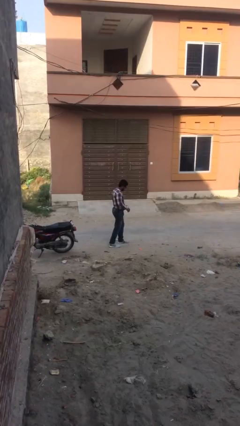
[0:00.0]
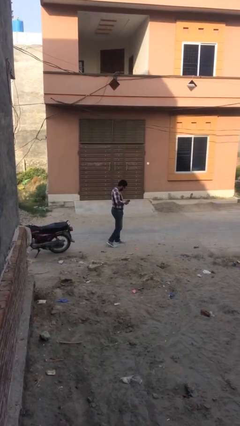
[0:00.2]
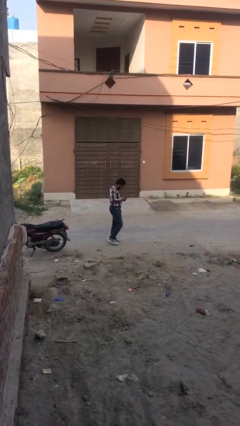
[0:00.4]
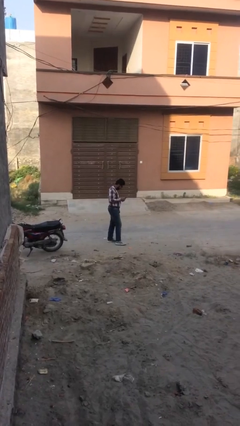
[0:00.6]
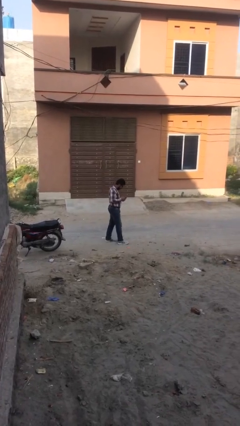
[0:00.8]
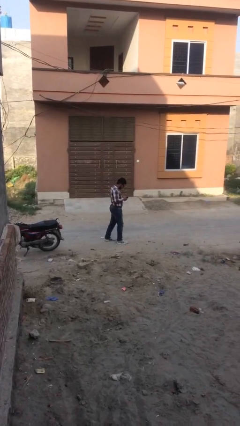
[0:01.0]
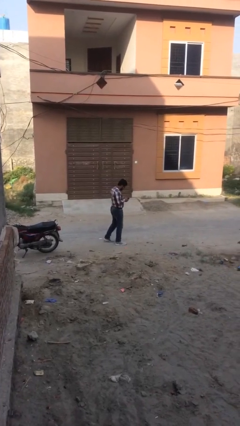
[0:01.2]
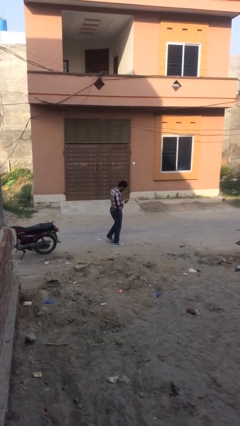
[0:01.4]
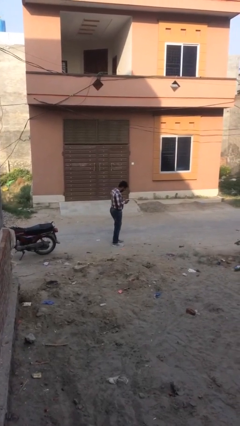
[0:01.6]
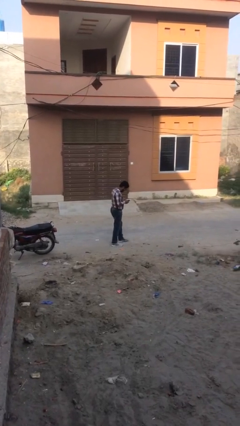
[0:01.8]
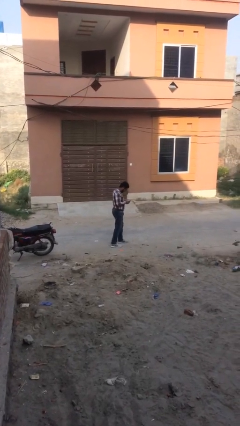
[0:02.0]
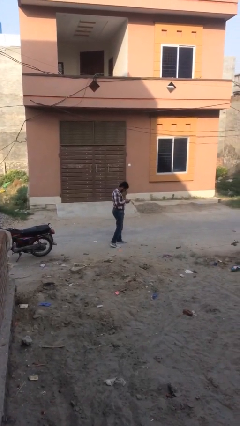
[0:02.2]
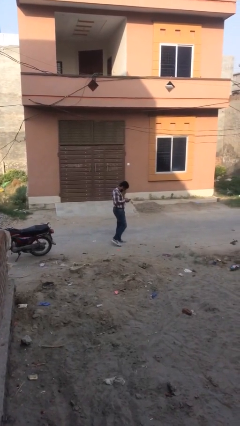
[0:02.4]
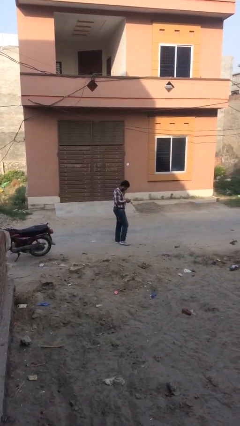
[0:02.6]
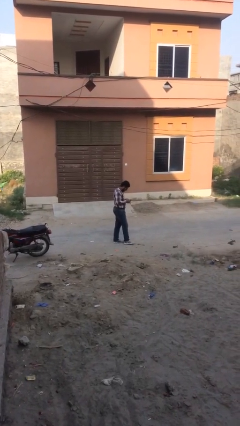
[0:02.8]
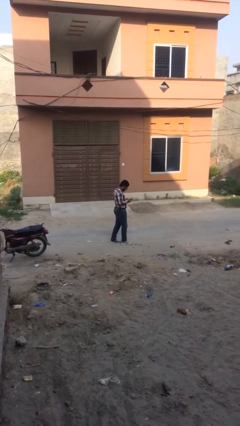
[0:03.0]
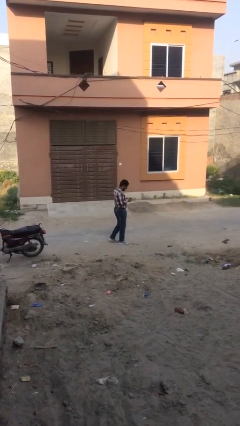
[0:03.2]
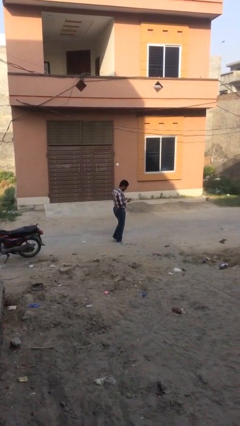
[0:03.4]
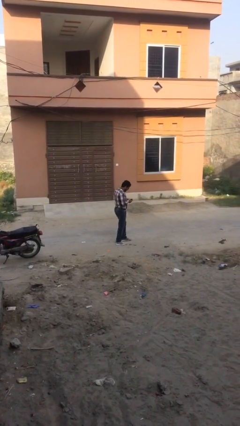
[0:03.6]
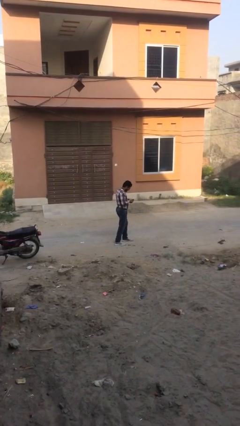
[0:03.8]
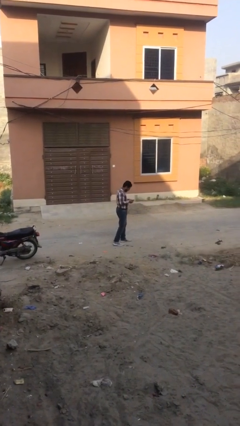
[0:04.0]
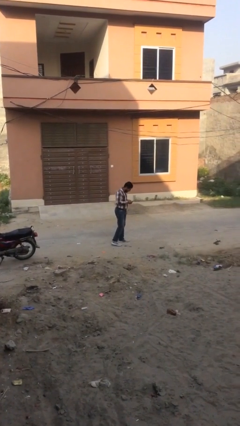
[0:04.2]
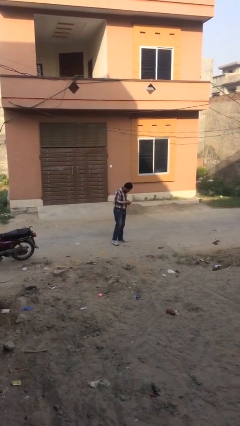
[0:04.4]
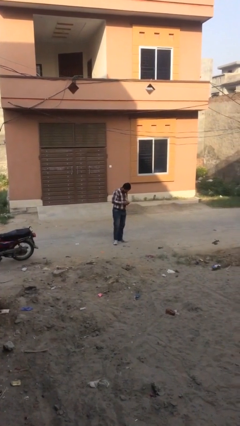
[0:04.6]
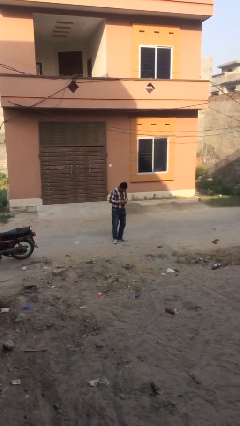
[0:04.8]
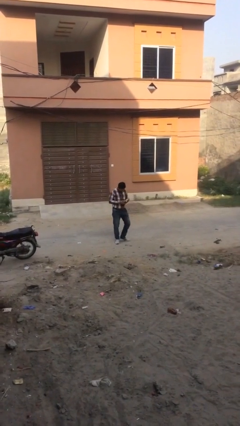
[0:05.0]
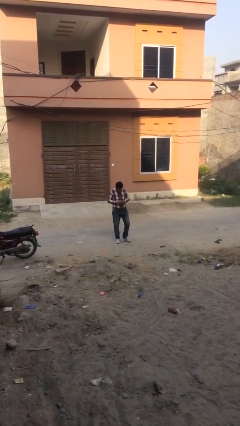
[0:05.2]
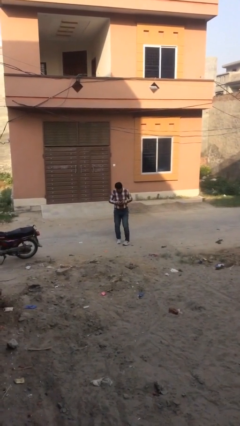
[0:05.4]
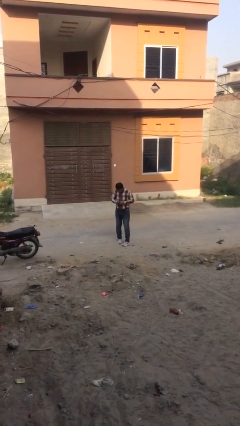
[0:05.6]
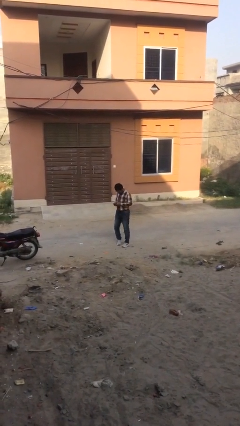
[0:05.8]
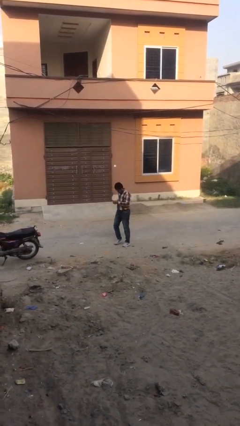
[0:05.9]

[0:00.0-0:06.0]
person texts on phone

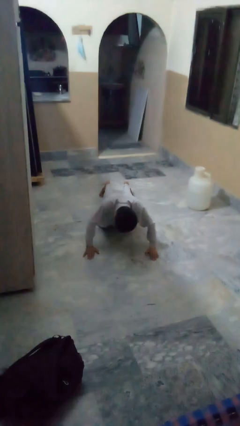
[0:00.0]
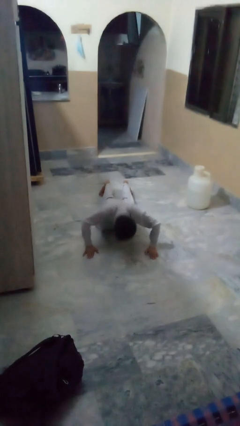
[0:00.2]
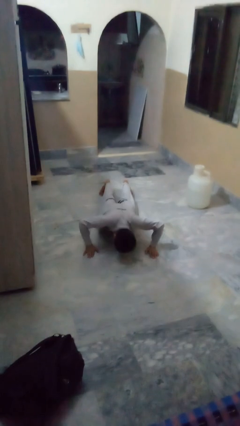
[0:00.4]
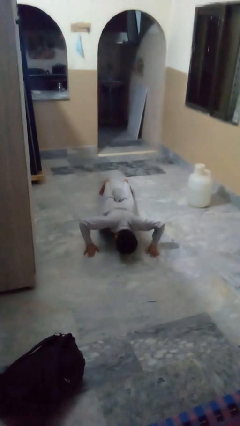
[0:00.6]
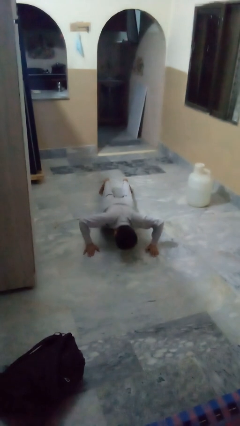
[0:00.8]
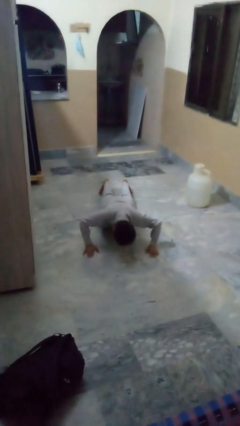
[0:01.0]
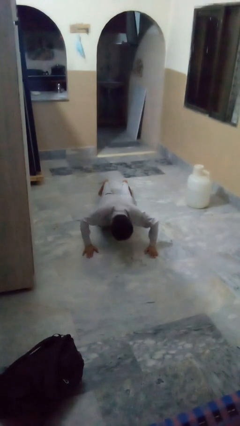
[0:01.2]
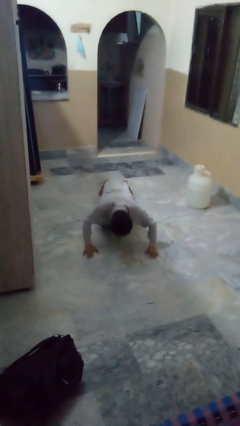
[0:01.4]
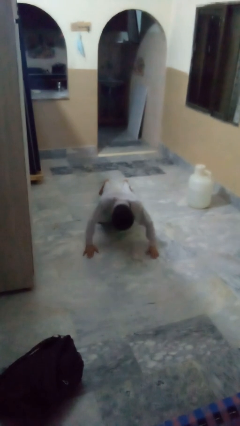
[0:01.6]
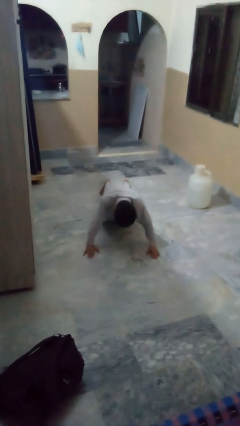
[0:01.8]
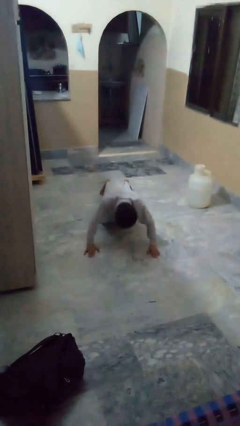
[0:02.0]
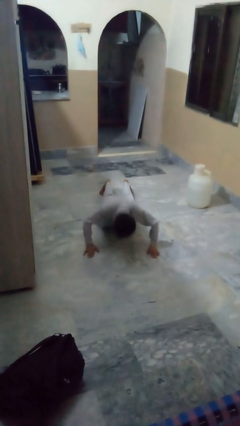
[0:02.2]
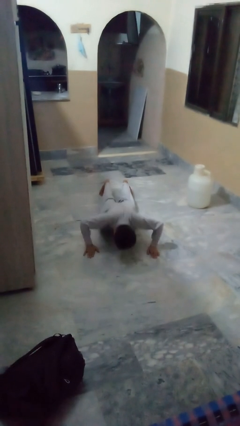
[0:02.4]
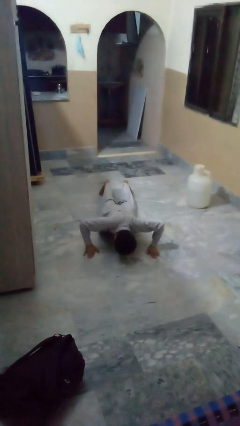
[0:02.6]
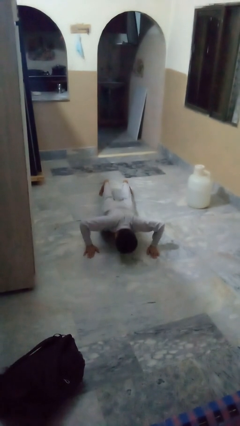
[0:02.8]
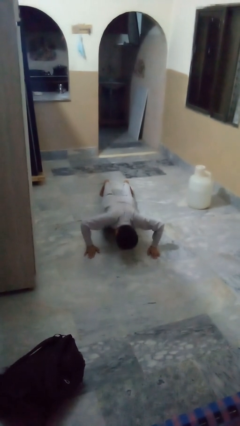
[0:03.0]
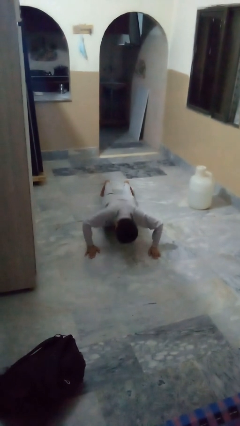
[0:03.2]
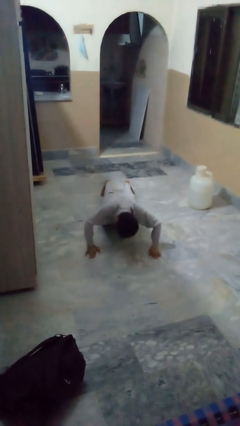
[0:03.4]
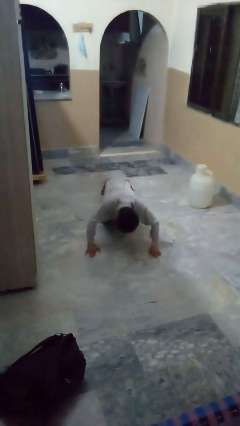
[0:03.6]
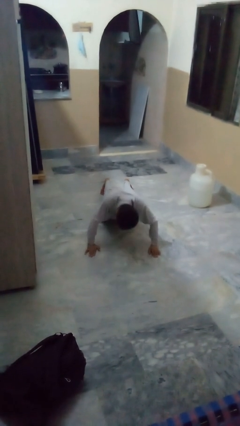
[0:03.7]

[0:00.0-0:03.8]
person exercises with pushup

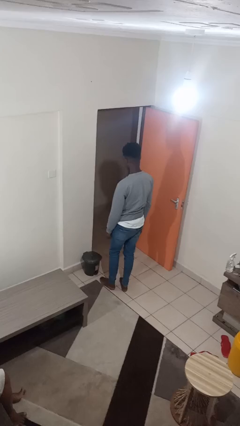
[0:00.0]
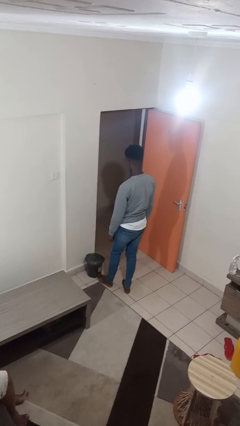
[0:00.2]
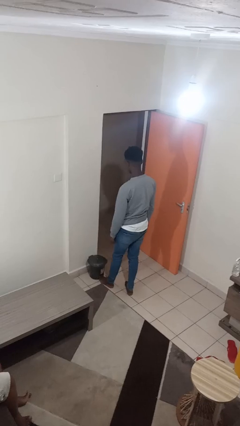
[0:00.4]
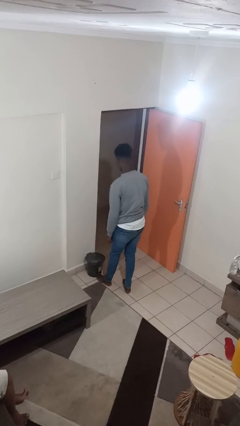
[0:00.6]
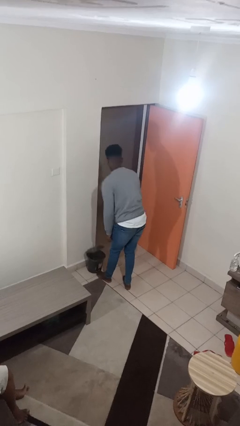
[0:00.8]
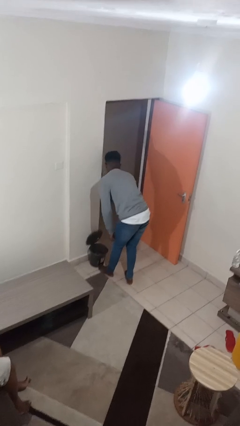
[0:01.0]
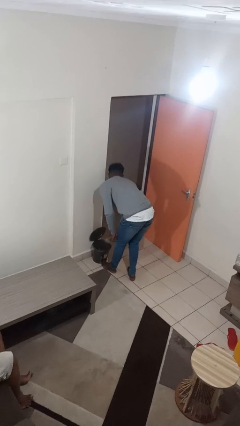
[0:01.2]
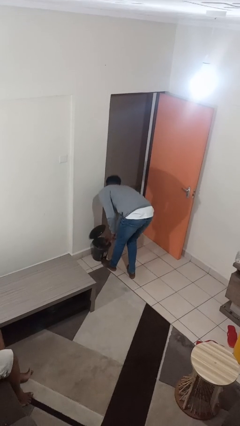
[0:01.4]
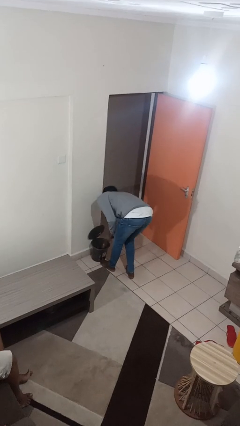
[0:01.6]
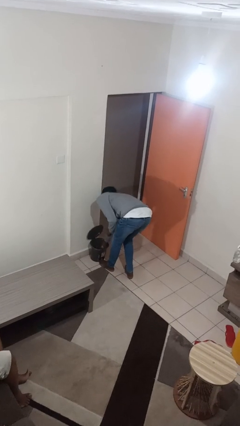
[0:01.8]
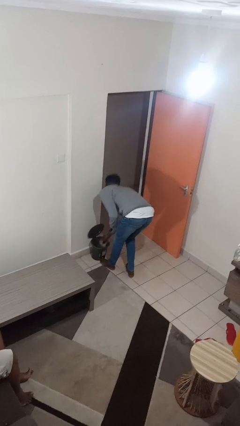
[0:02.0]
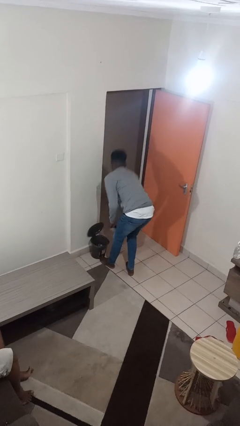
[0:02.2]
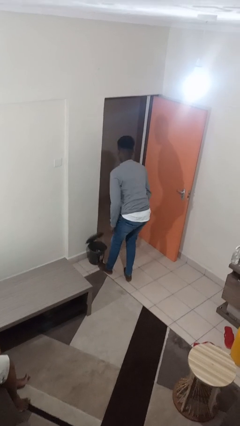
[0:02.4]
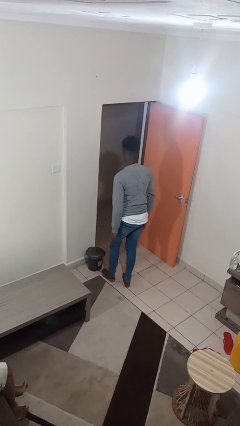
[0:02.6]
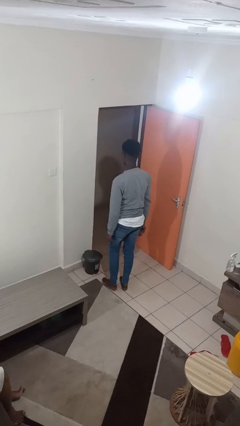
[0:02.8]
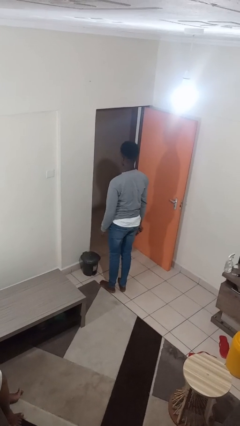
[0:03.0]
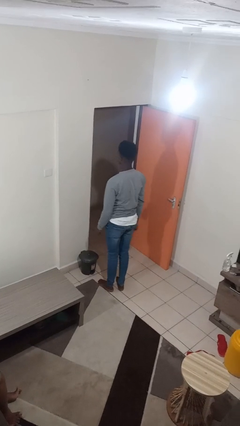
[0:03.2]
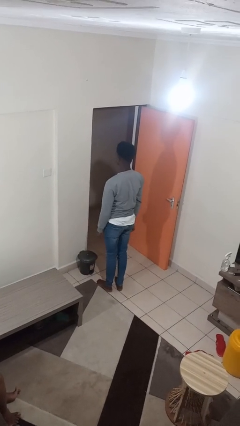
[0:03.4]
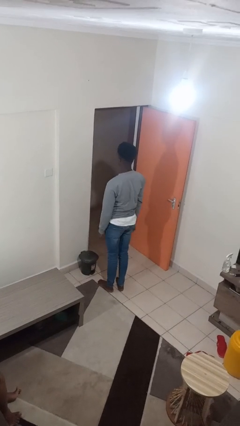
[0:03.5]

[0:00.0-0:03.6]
person discards trash

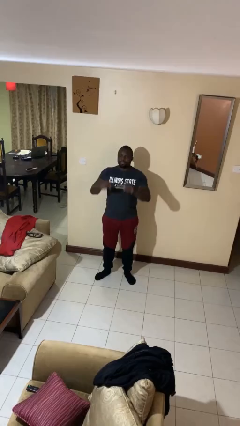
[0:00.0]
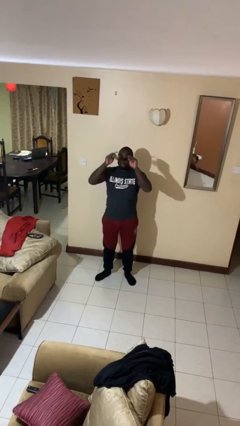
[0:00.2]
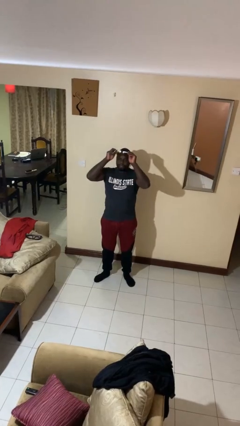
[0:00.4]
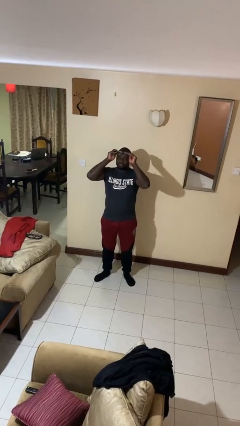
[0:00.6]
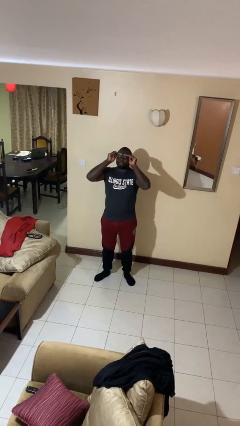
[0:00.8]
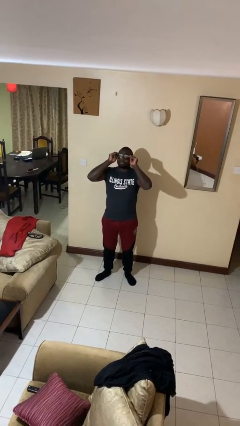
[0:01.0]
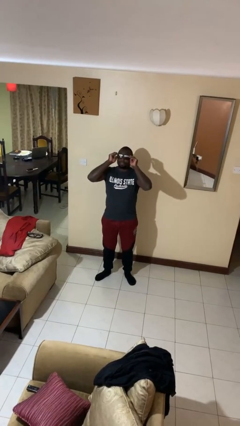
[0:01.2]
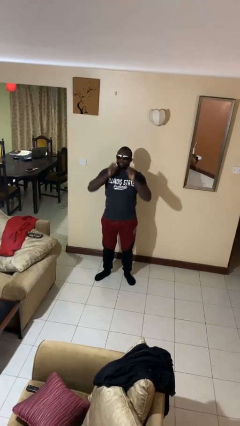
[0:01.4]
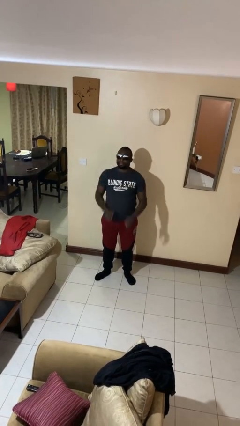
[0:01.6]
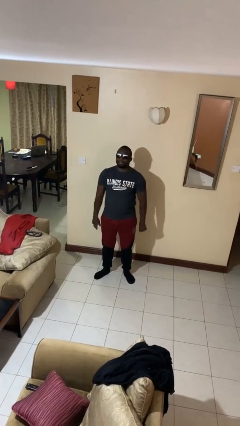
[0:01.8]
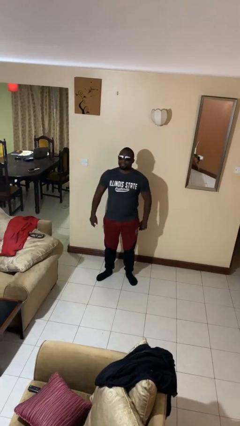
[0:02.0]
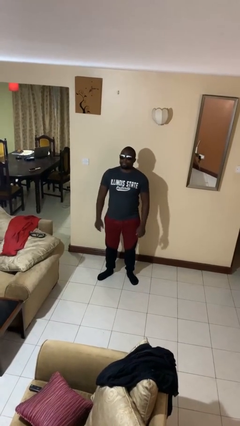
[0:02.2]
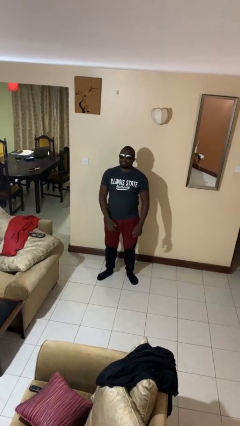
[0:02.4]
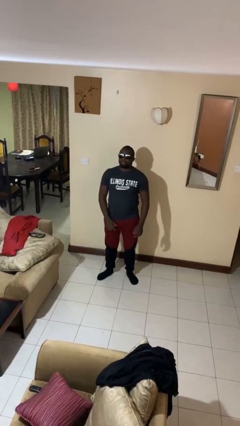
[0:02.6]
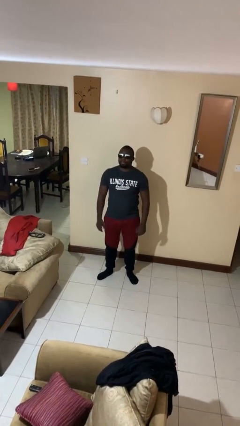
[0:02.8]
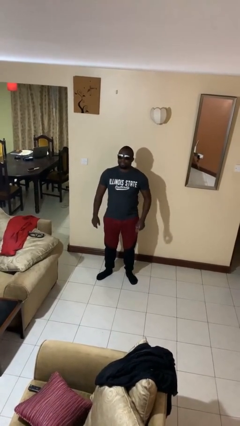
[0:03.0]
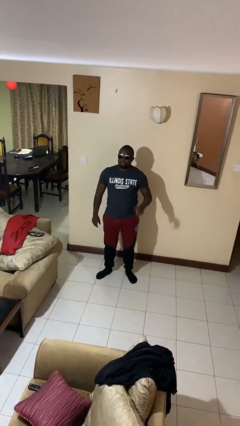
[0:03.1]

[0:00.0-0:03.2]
person puts on sunglasses

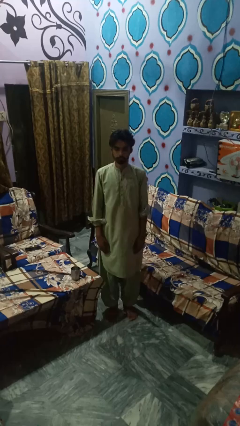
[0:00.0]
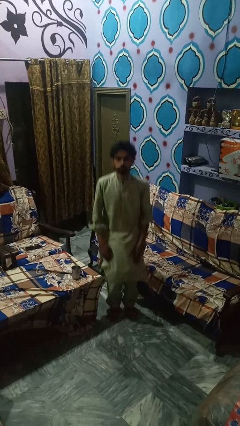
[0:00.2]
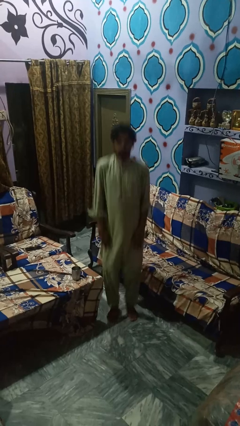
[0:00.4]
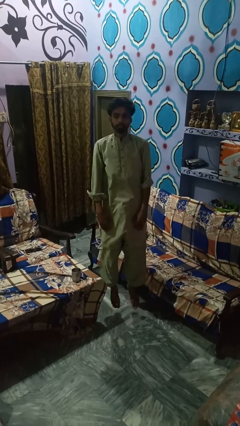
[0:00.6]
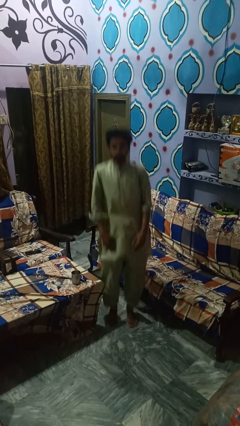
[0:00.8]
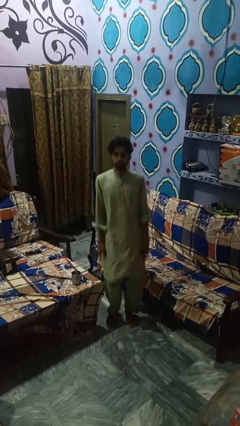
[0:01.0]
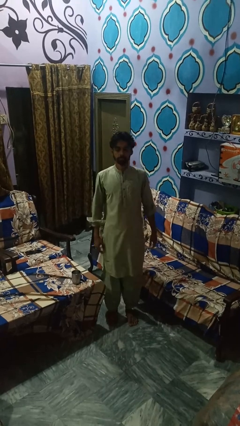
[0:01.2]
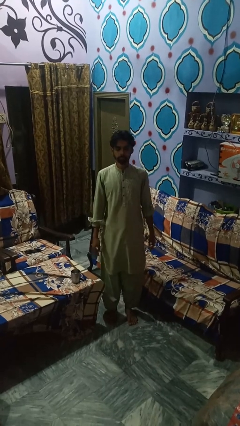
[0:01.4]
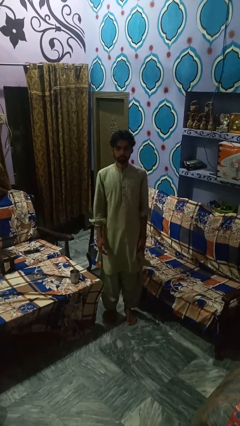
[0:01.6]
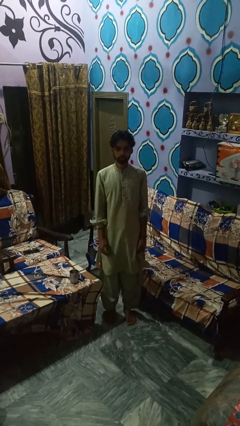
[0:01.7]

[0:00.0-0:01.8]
person jumps
